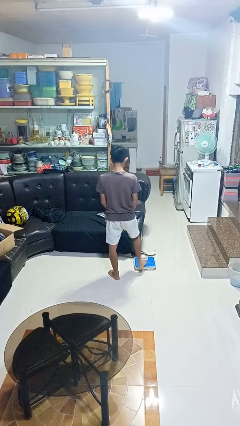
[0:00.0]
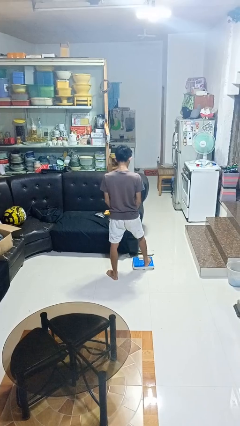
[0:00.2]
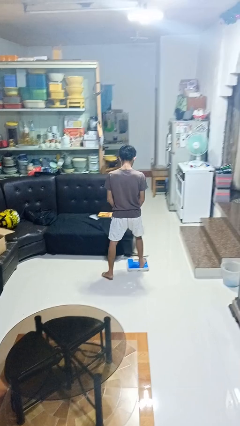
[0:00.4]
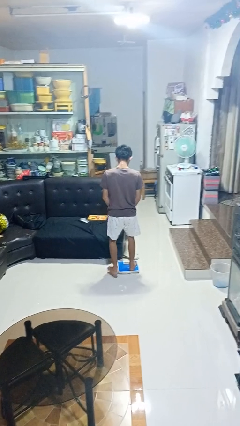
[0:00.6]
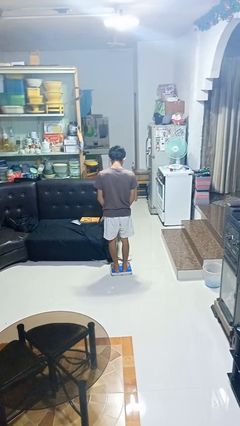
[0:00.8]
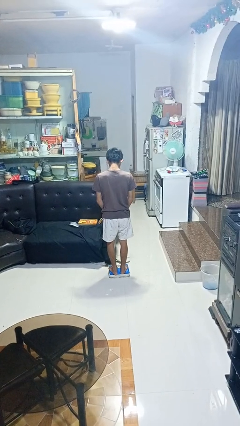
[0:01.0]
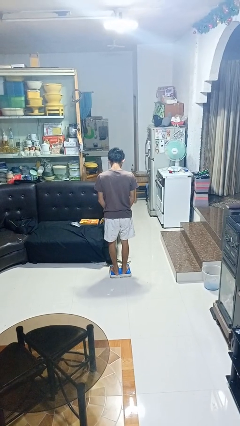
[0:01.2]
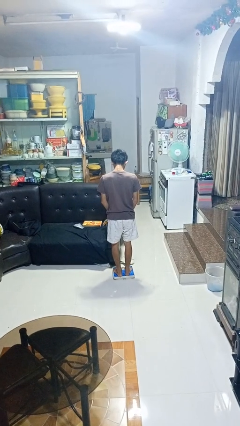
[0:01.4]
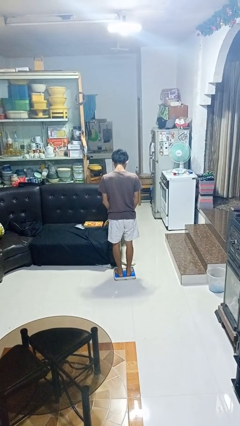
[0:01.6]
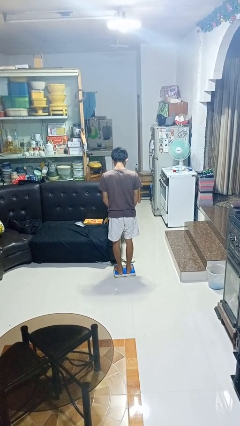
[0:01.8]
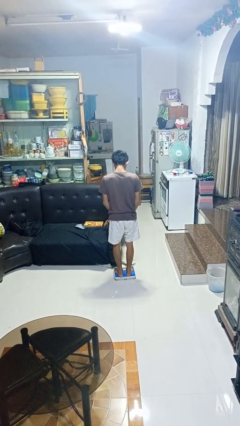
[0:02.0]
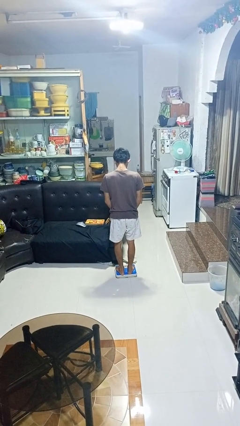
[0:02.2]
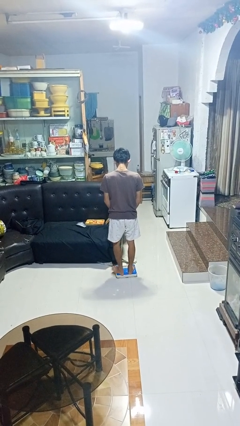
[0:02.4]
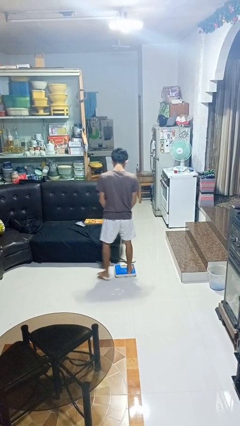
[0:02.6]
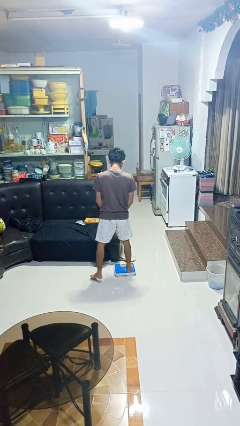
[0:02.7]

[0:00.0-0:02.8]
person uses bodyweight scale

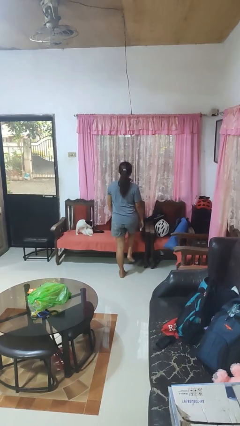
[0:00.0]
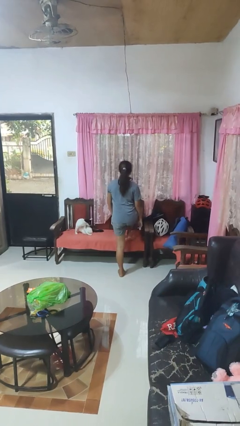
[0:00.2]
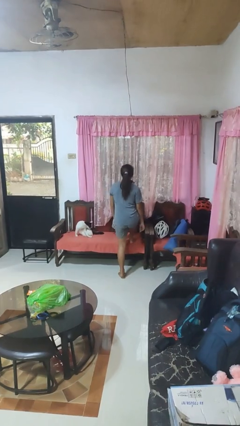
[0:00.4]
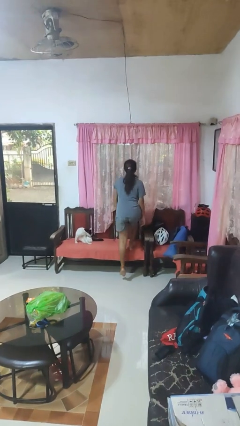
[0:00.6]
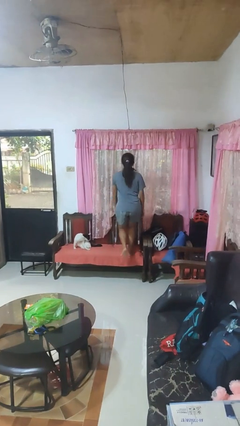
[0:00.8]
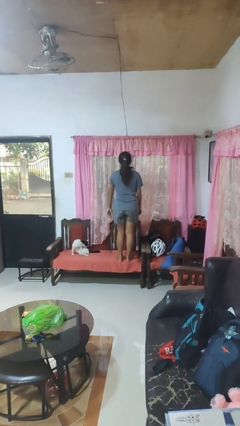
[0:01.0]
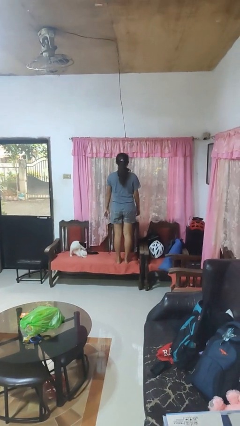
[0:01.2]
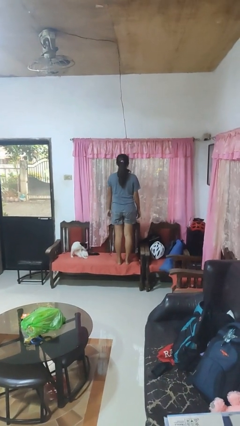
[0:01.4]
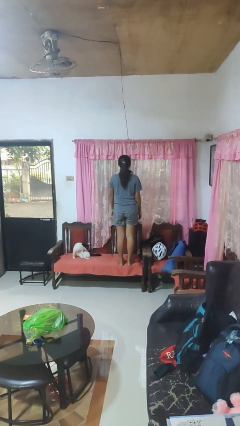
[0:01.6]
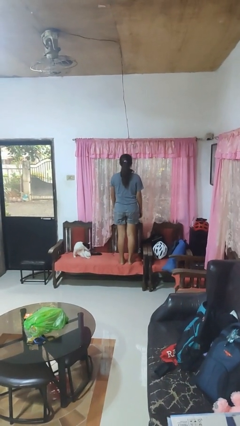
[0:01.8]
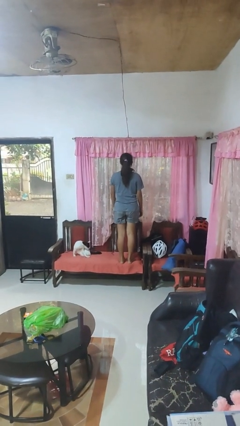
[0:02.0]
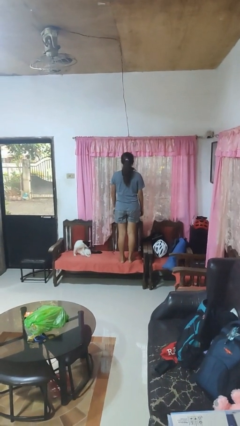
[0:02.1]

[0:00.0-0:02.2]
person climbs on chair

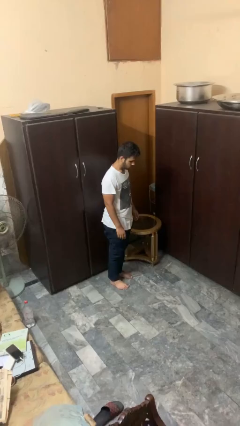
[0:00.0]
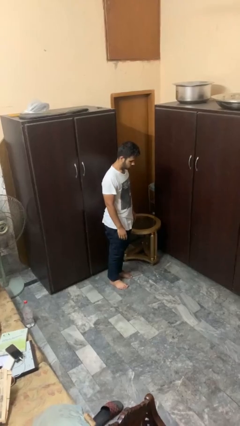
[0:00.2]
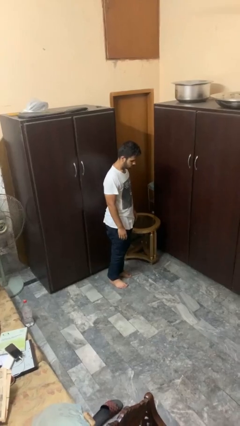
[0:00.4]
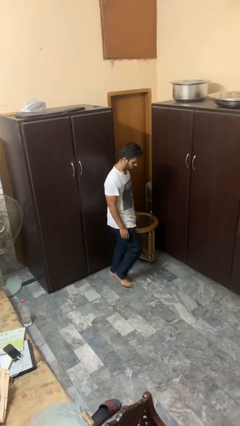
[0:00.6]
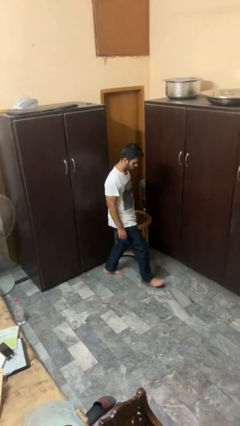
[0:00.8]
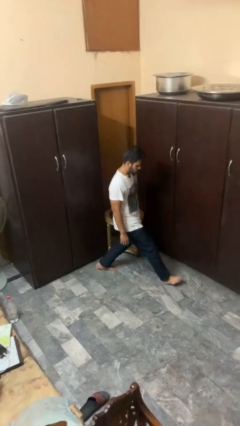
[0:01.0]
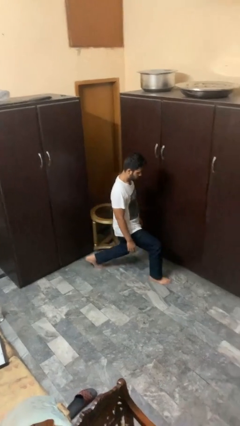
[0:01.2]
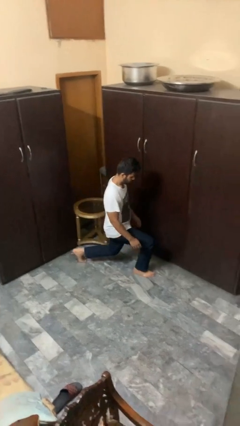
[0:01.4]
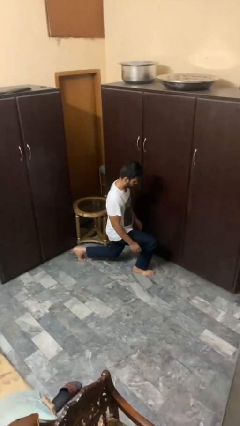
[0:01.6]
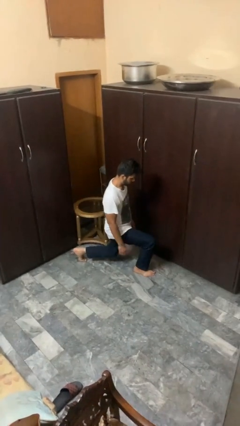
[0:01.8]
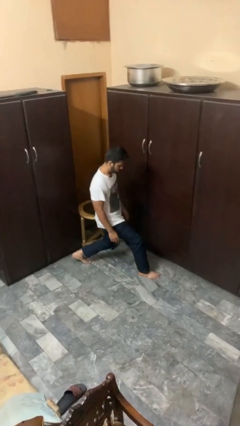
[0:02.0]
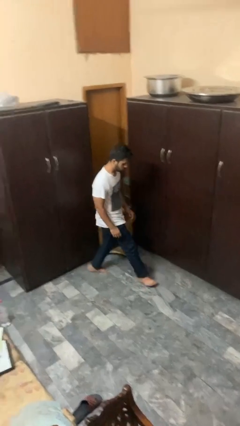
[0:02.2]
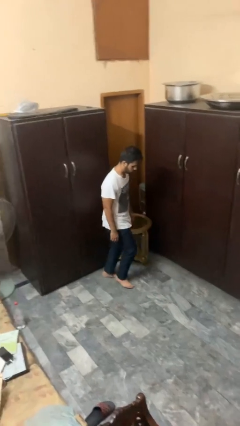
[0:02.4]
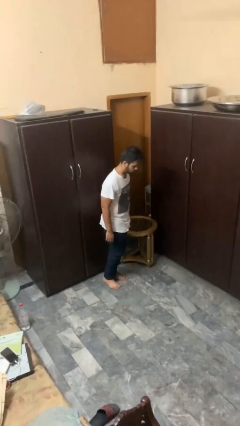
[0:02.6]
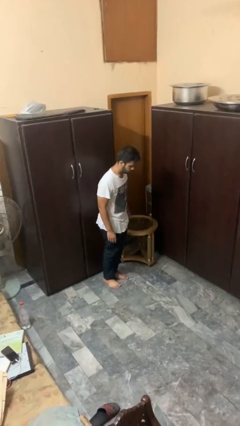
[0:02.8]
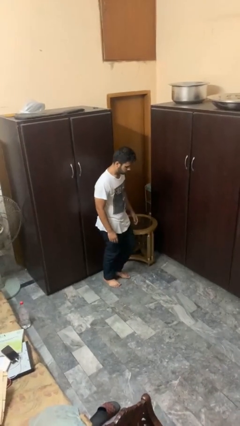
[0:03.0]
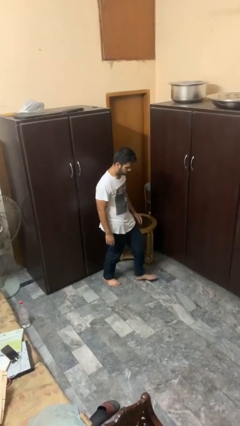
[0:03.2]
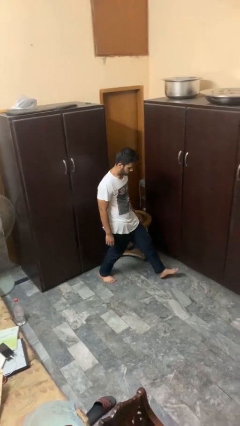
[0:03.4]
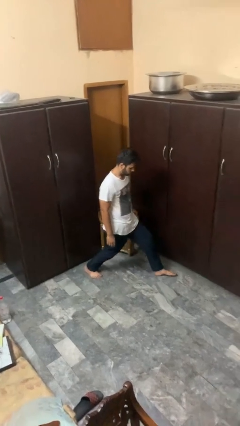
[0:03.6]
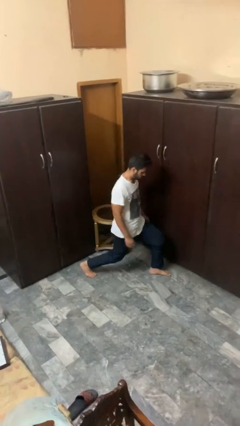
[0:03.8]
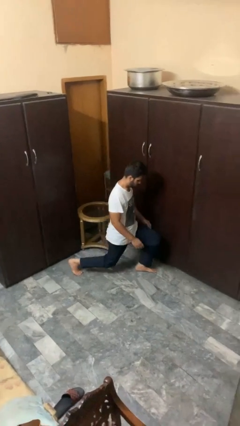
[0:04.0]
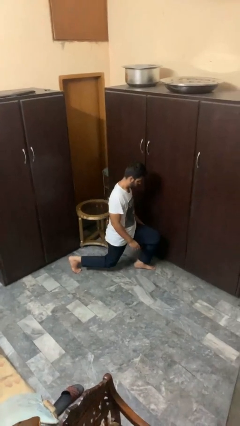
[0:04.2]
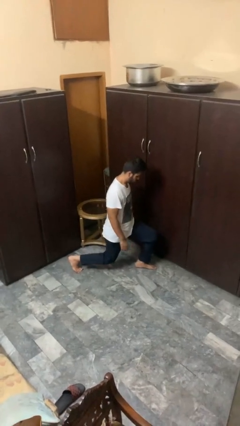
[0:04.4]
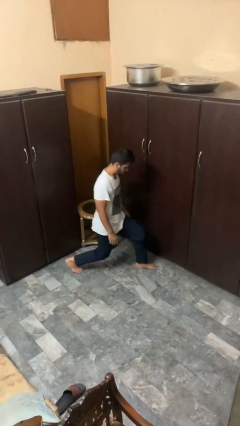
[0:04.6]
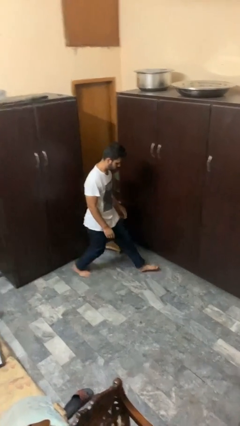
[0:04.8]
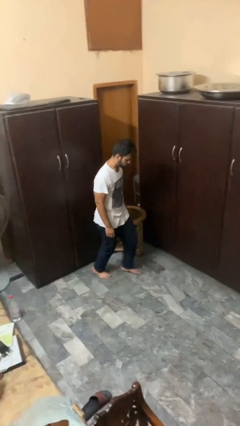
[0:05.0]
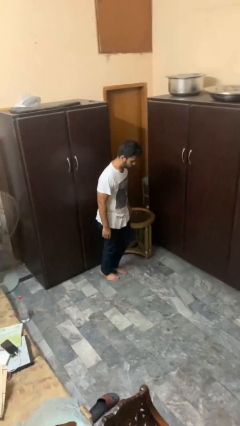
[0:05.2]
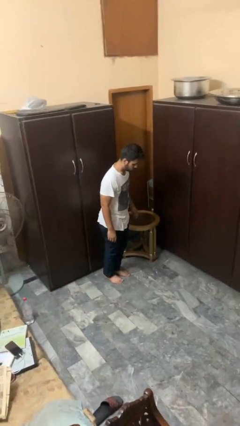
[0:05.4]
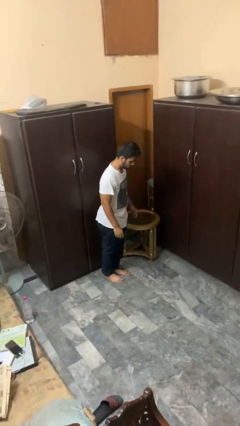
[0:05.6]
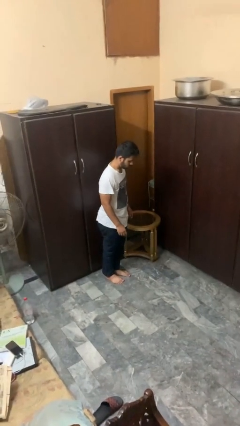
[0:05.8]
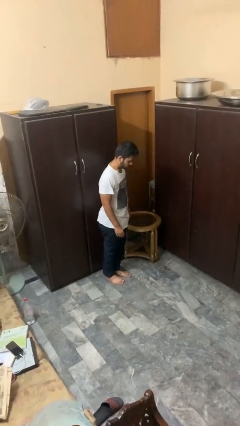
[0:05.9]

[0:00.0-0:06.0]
person exercises with lunges

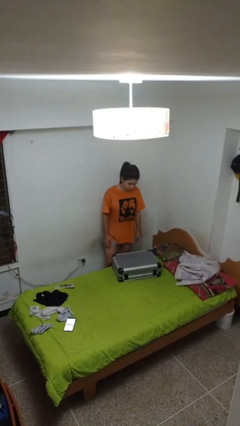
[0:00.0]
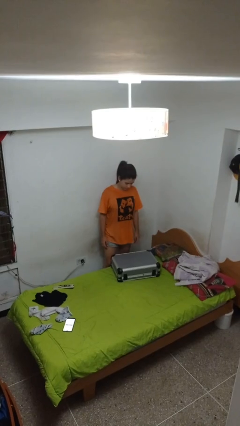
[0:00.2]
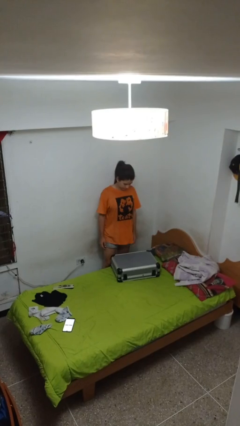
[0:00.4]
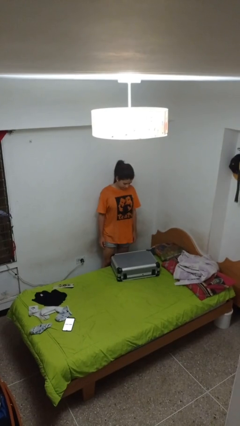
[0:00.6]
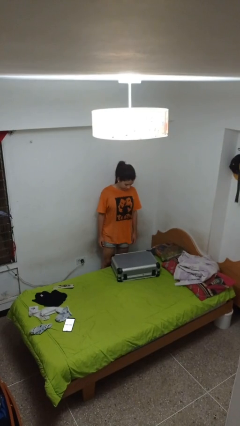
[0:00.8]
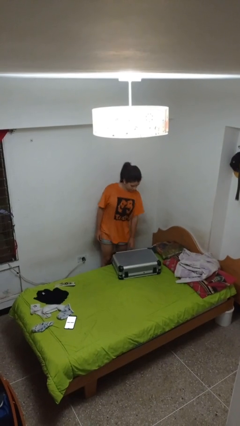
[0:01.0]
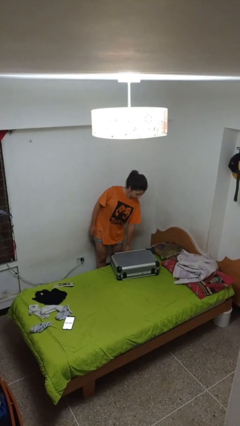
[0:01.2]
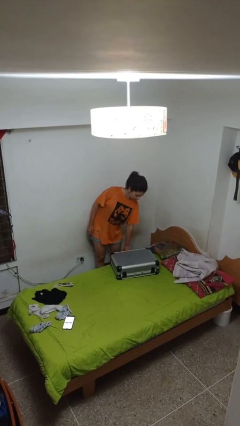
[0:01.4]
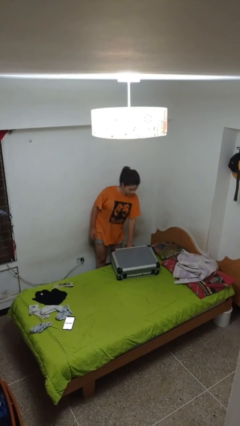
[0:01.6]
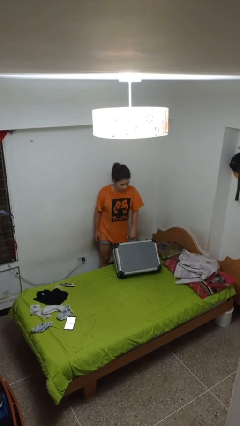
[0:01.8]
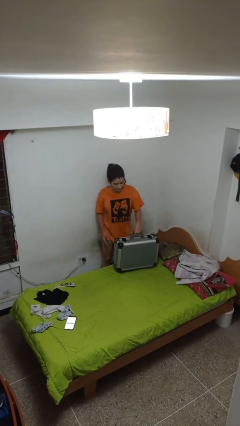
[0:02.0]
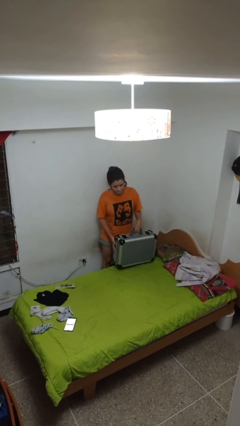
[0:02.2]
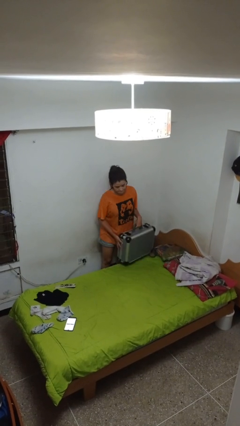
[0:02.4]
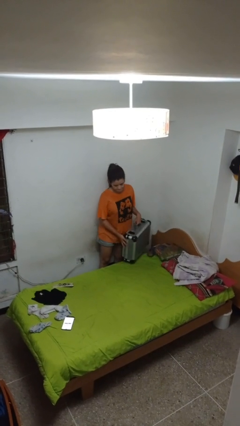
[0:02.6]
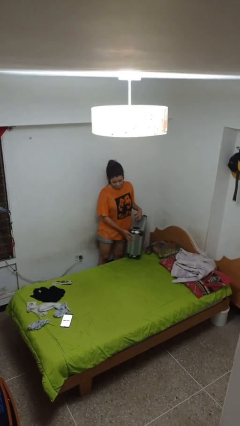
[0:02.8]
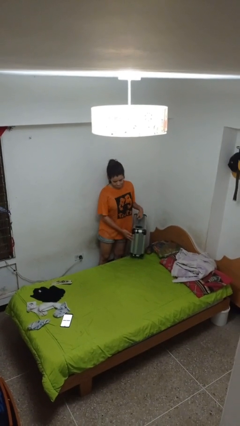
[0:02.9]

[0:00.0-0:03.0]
person picks up object from bed

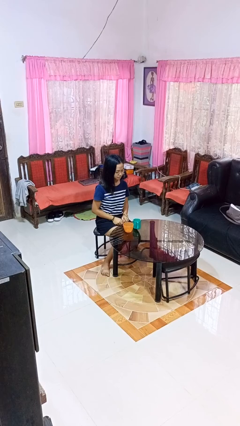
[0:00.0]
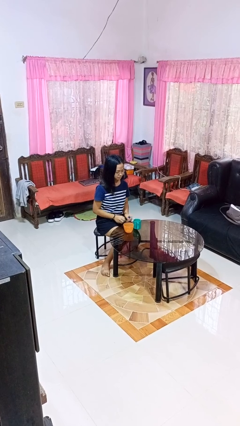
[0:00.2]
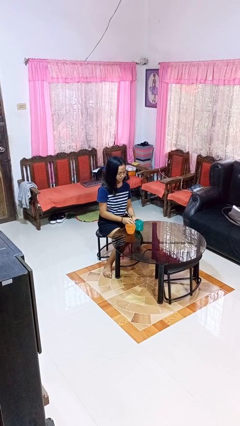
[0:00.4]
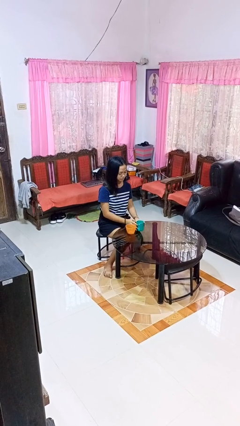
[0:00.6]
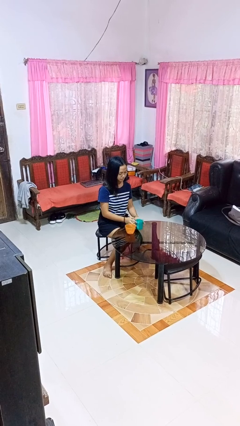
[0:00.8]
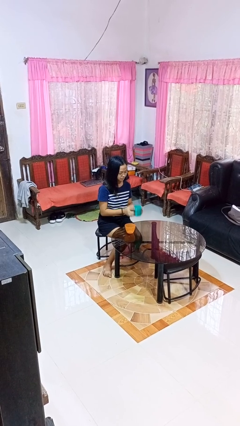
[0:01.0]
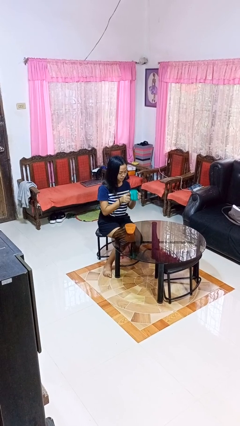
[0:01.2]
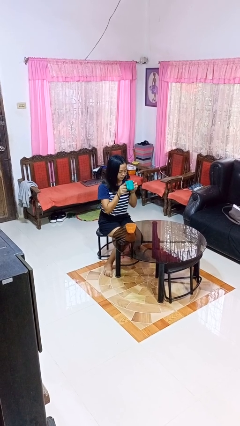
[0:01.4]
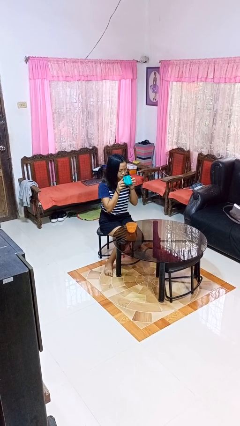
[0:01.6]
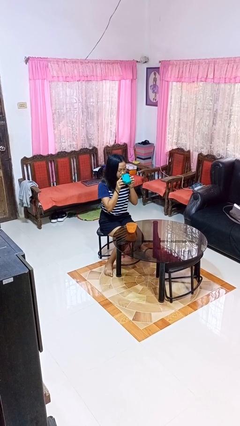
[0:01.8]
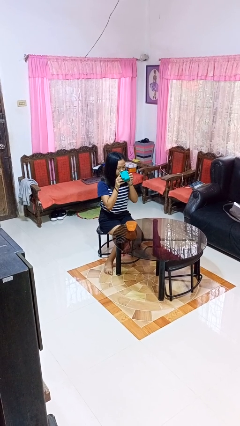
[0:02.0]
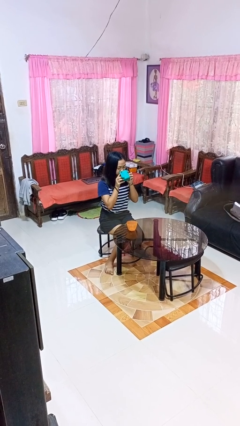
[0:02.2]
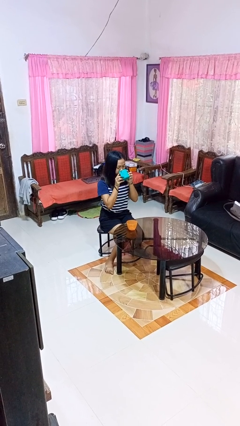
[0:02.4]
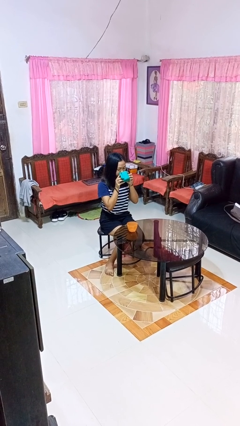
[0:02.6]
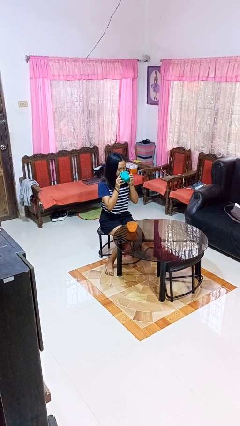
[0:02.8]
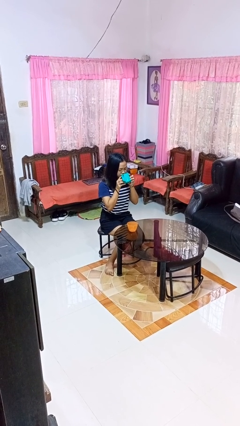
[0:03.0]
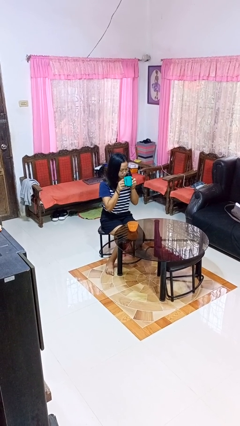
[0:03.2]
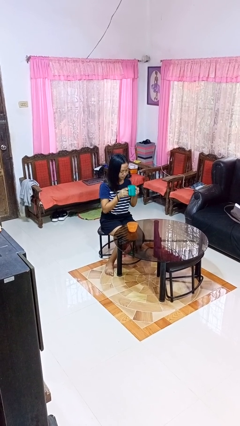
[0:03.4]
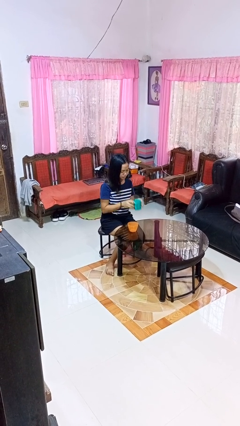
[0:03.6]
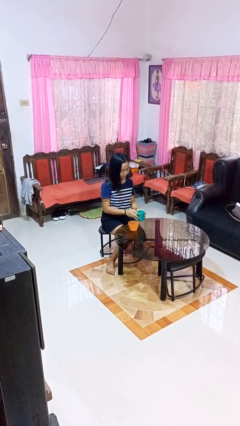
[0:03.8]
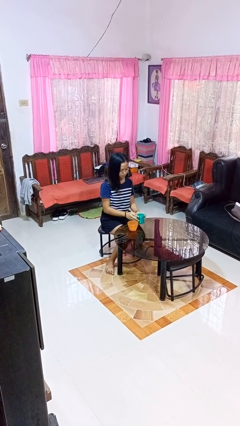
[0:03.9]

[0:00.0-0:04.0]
person drinks from cup
